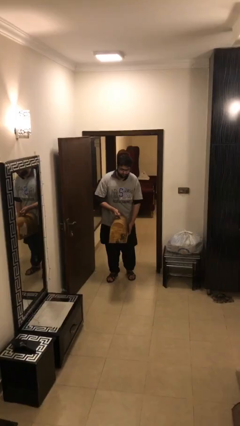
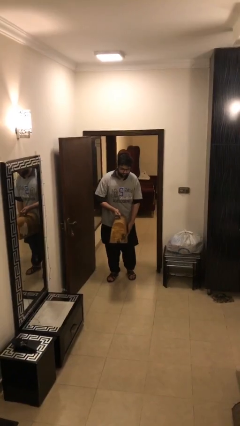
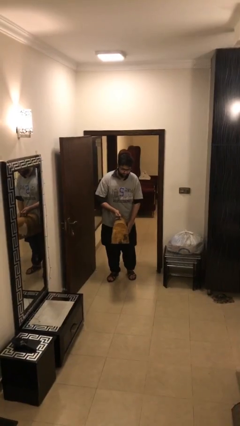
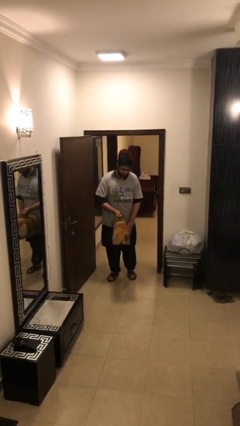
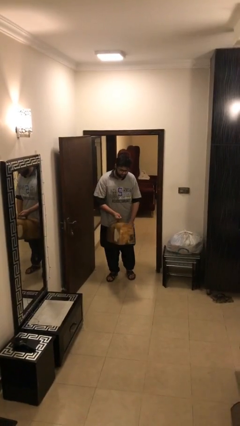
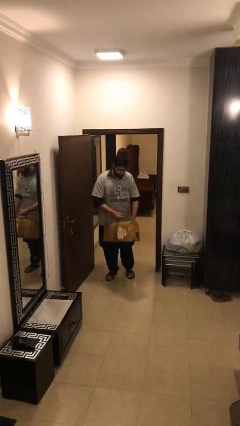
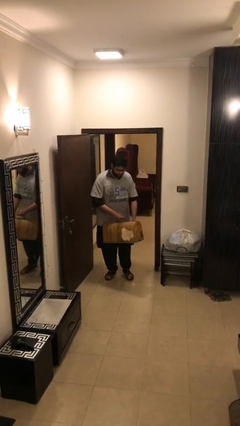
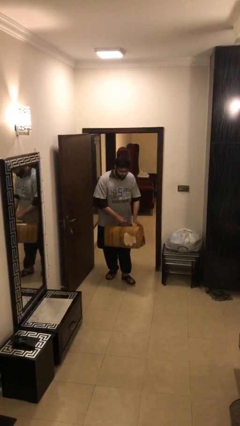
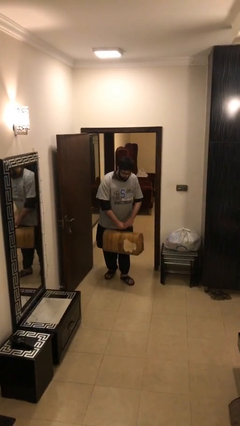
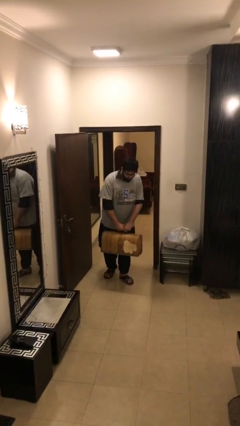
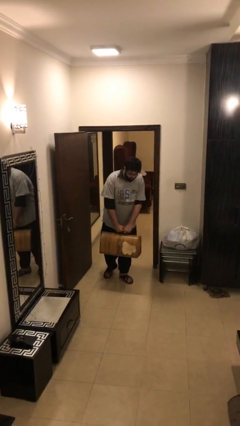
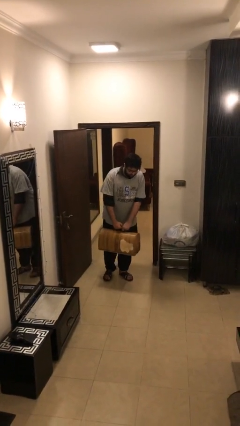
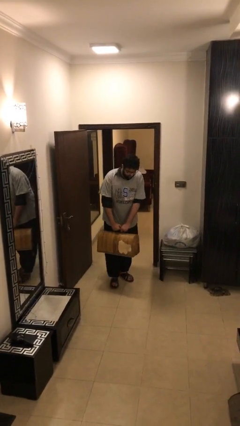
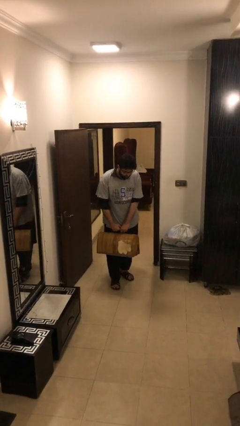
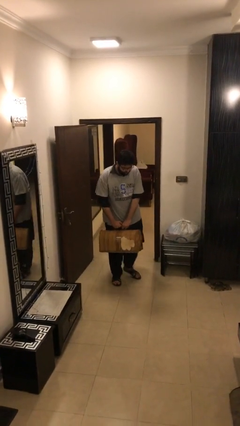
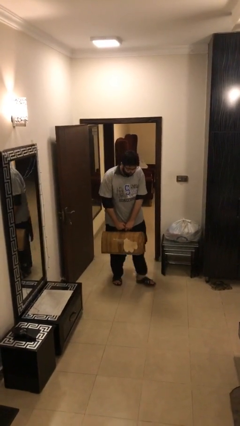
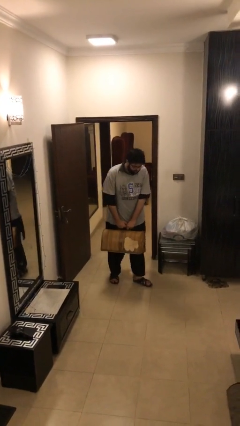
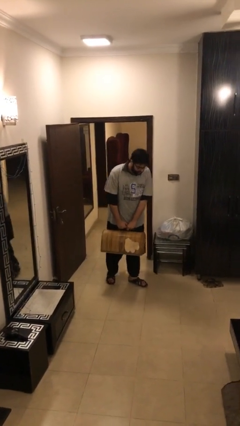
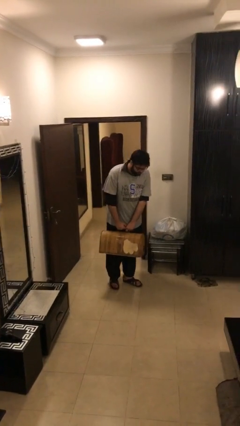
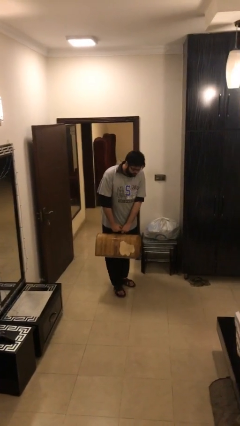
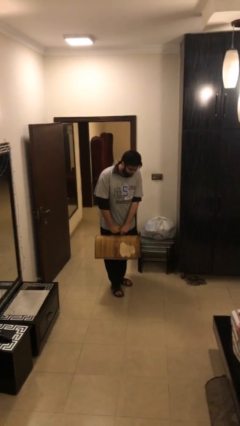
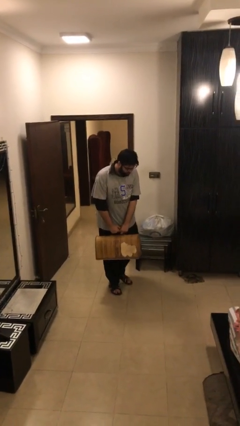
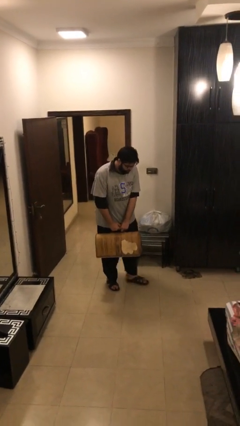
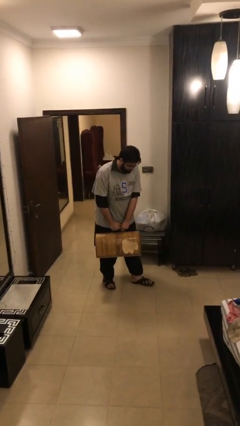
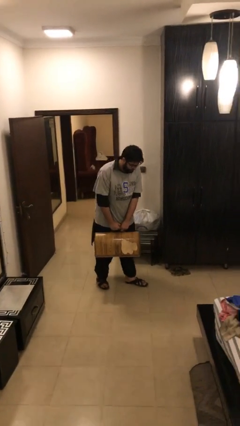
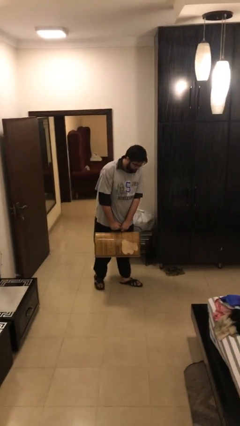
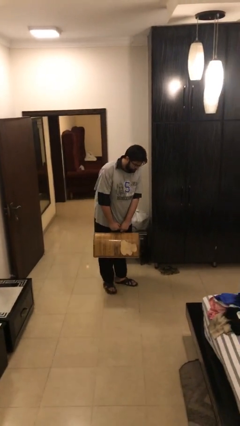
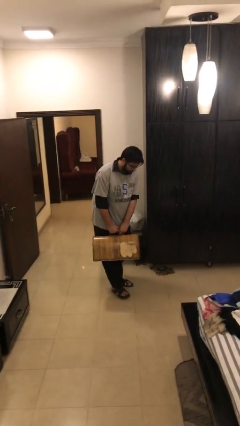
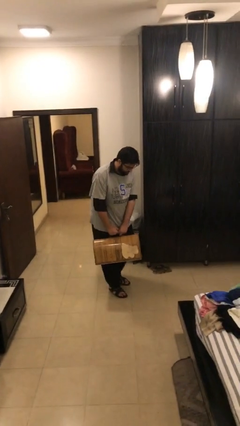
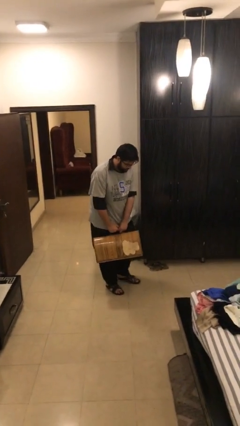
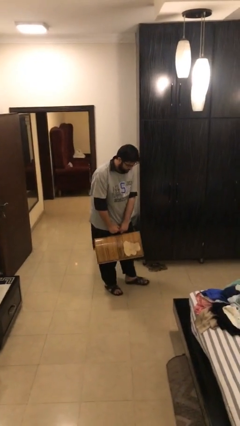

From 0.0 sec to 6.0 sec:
person carries heavy object

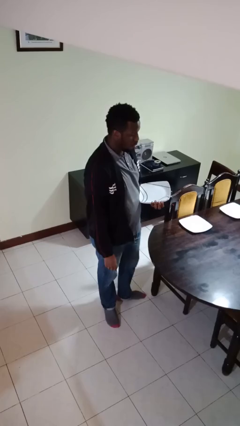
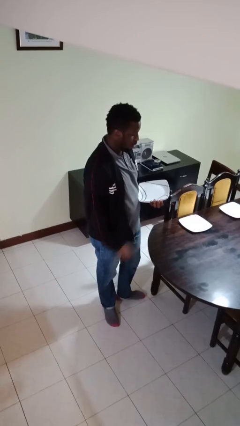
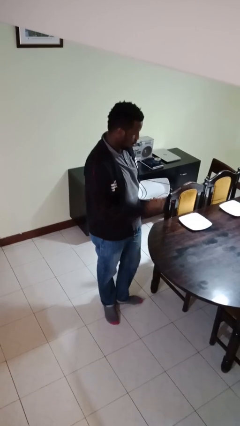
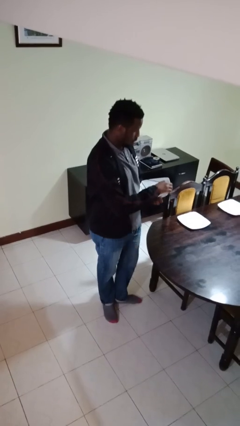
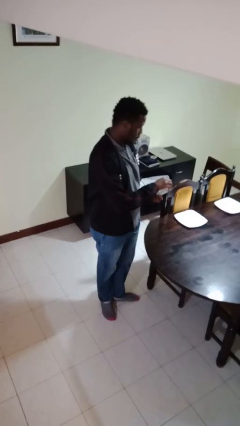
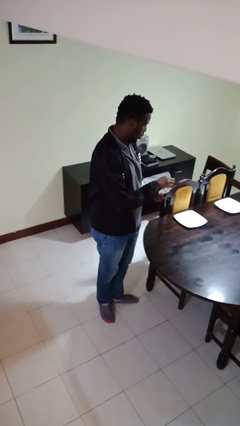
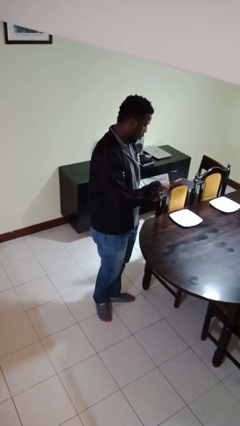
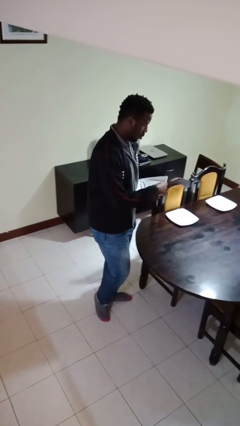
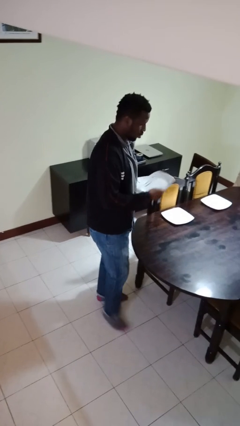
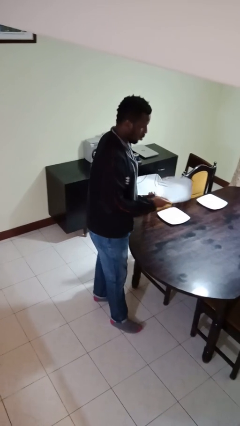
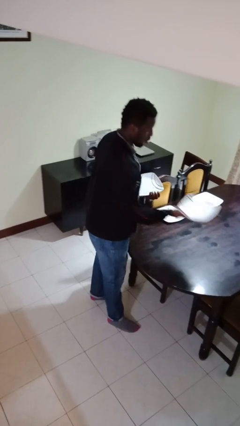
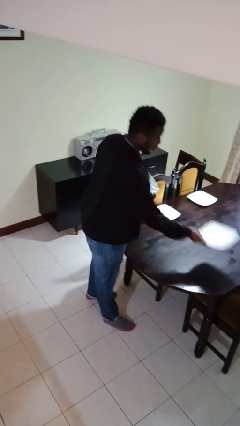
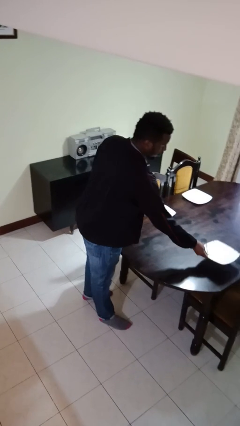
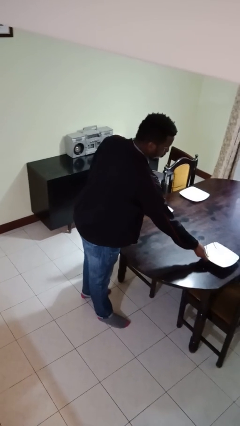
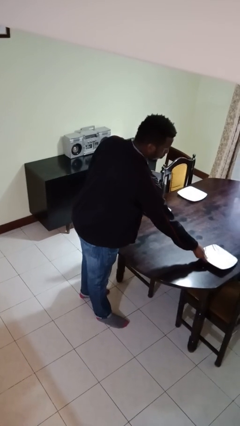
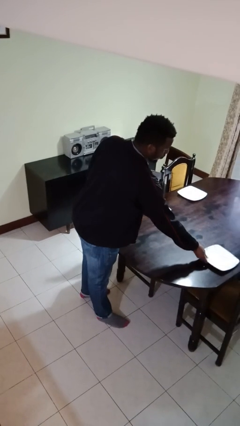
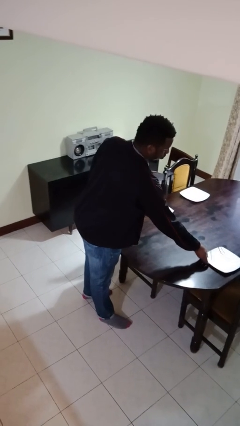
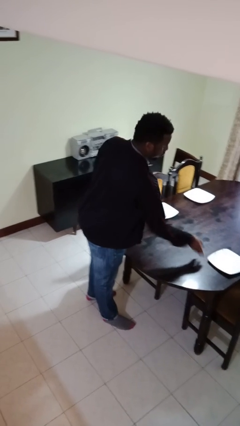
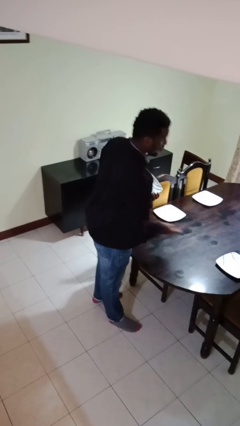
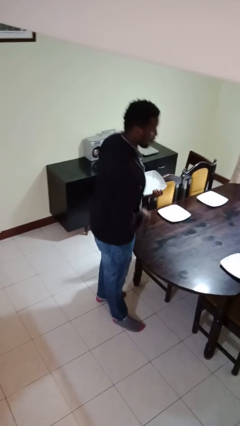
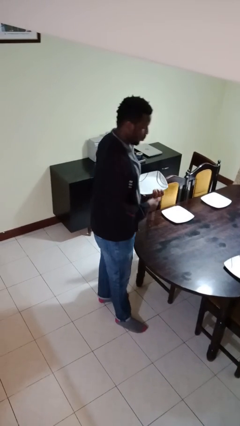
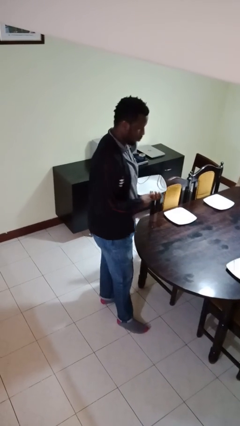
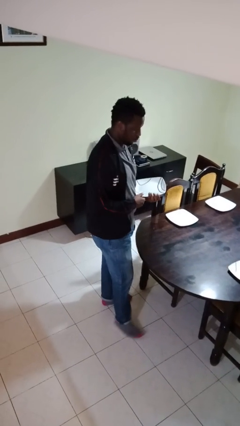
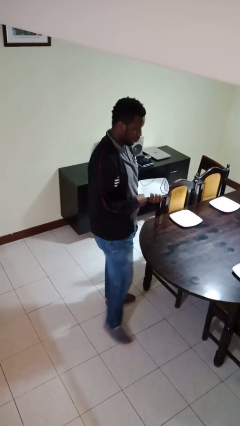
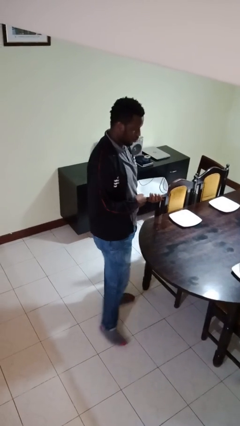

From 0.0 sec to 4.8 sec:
person sets table

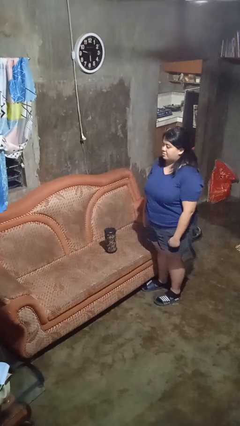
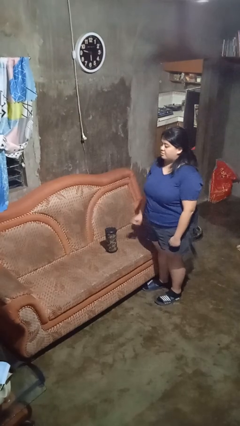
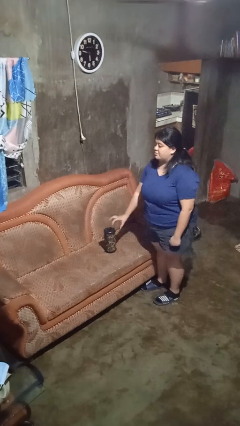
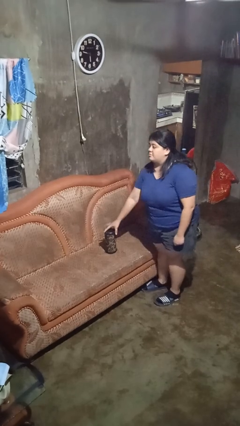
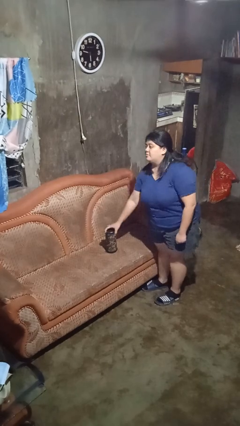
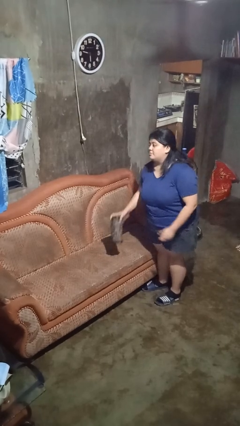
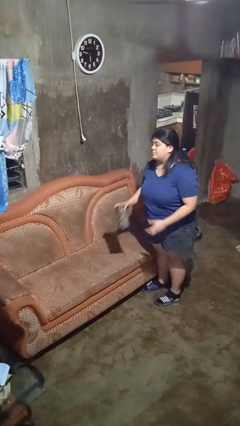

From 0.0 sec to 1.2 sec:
person picks up object from couch

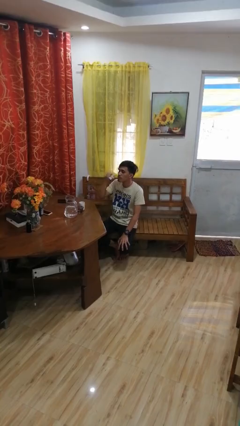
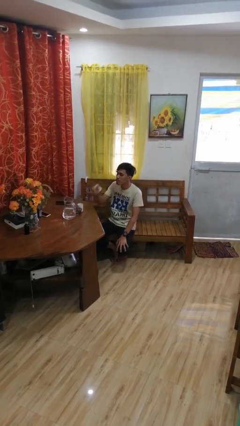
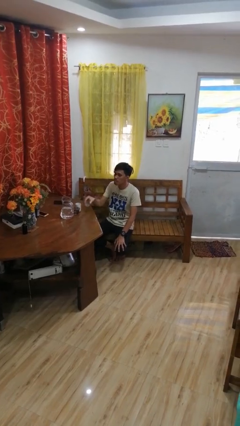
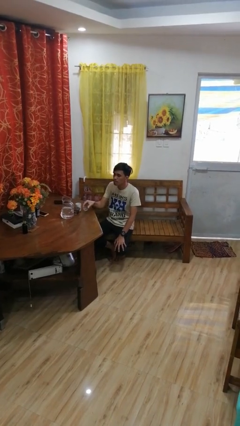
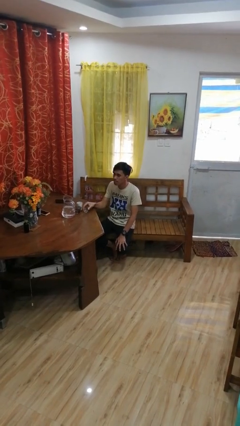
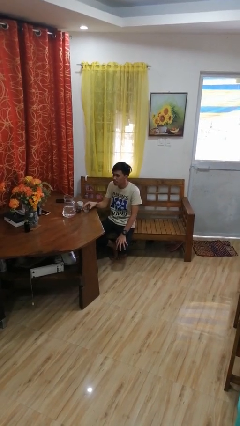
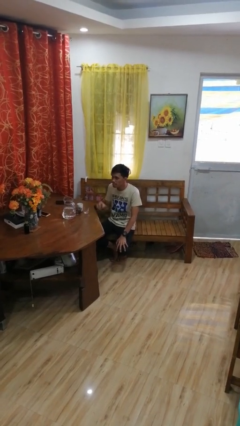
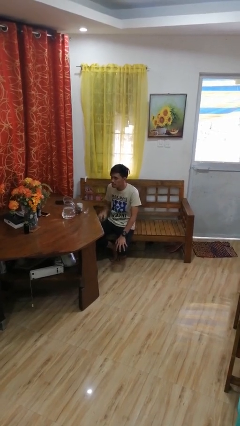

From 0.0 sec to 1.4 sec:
person puts down object on table

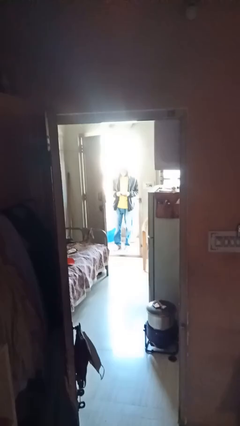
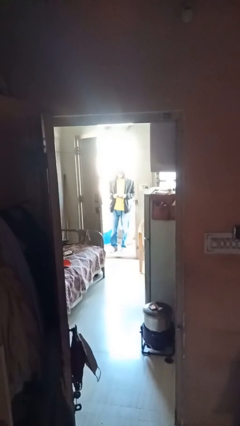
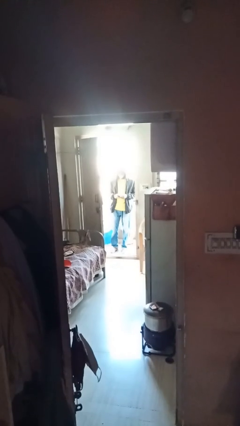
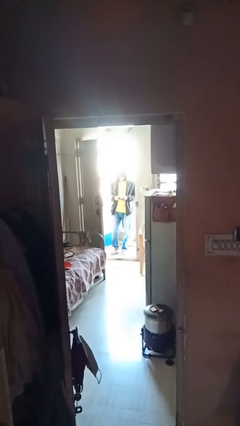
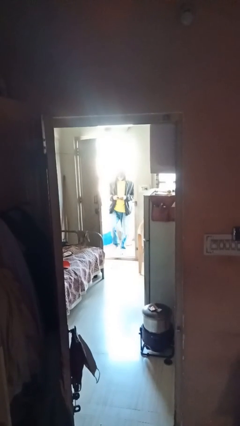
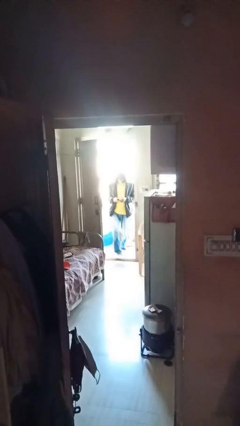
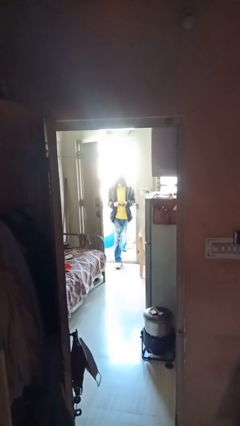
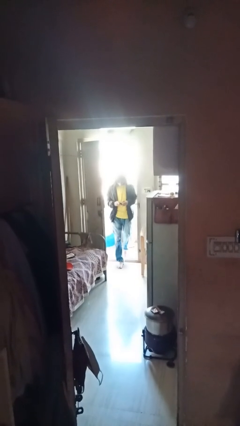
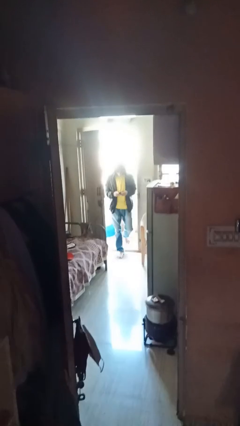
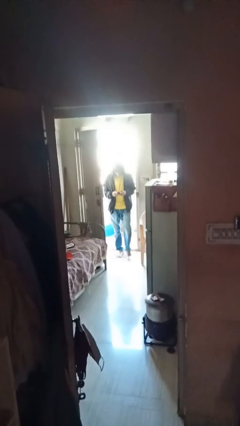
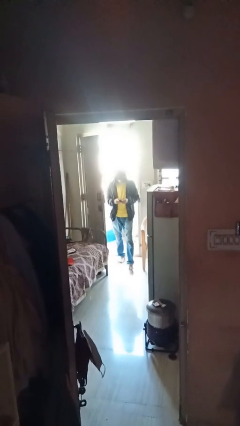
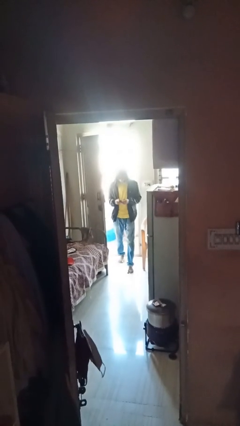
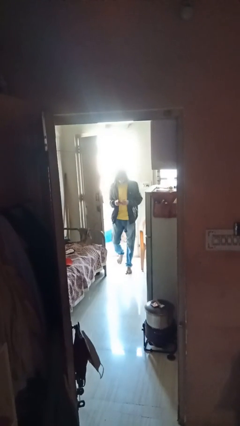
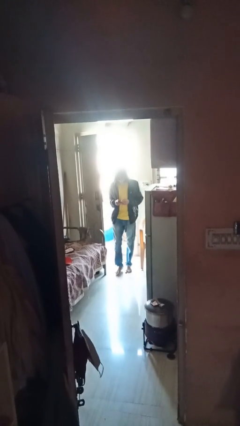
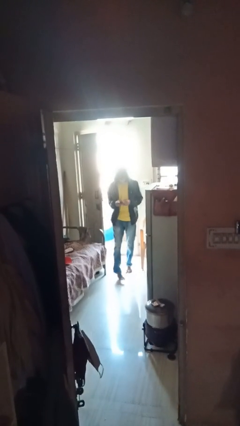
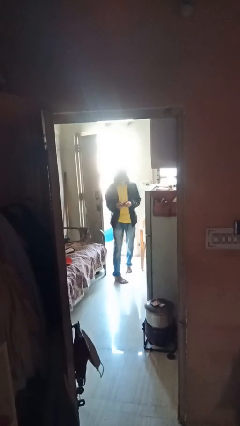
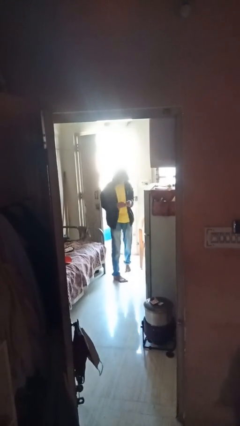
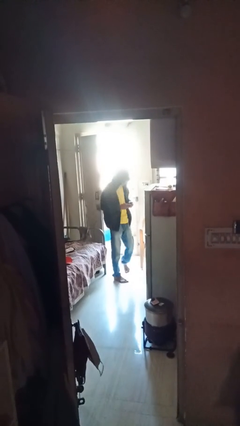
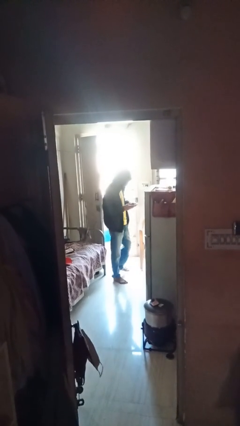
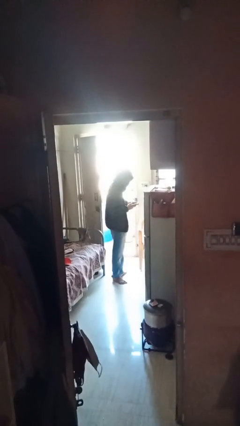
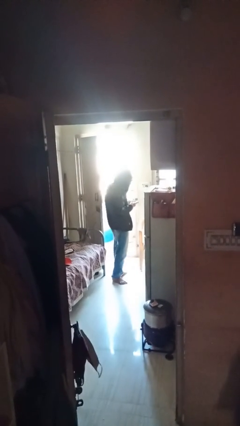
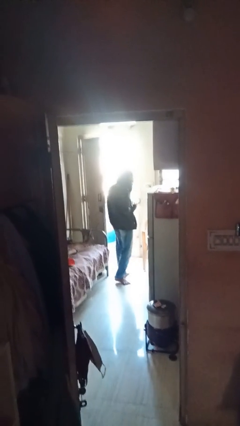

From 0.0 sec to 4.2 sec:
person enters scene through structure

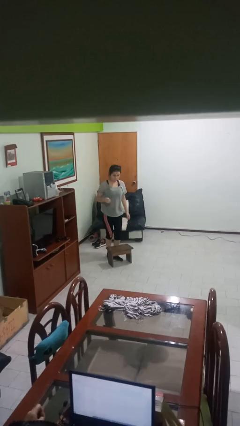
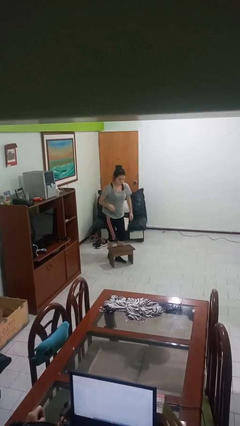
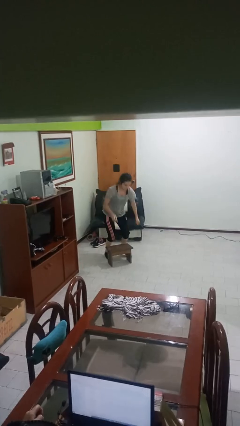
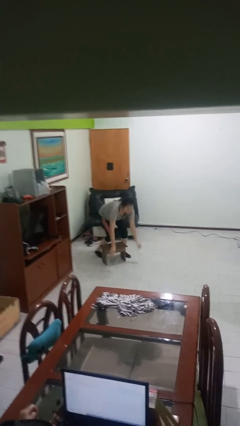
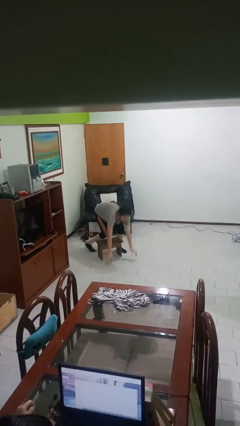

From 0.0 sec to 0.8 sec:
person trips on object on floor
